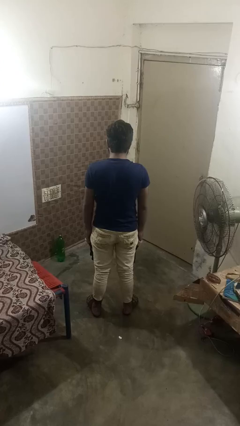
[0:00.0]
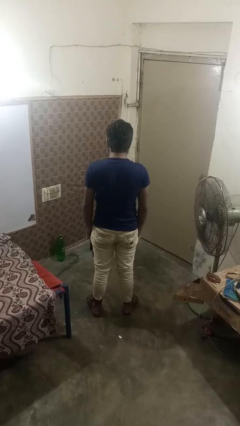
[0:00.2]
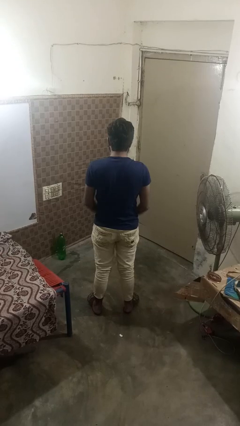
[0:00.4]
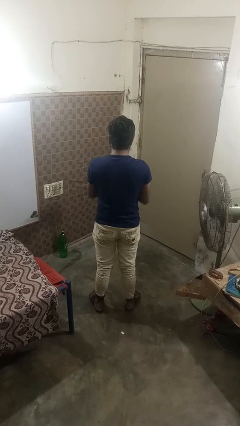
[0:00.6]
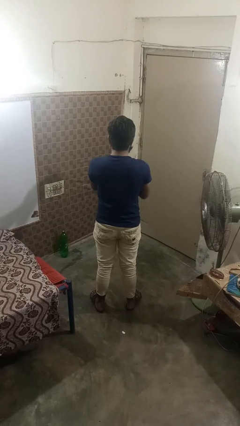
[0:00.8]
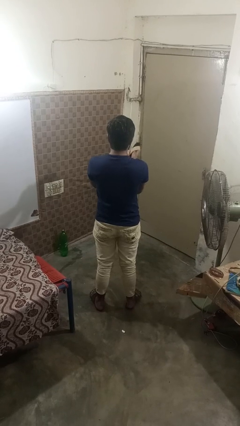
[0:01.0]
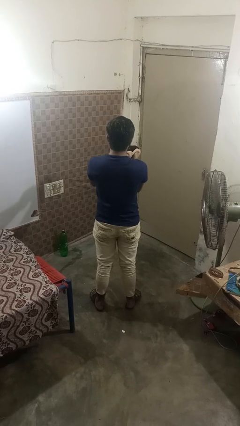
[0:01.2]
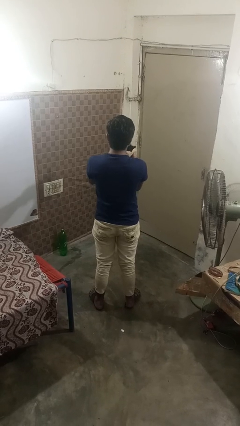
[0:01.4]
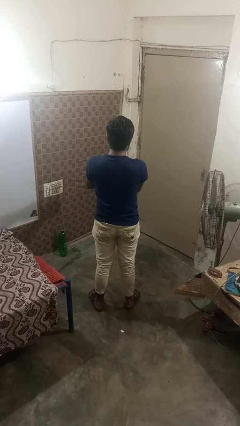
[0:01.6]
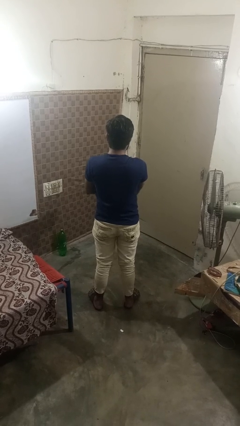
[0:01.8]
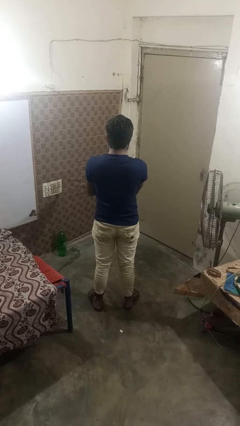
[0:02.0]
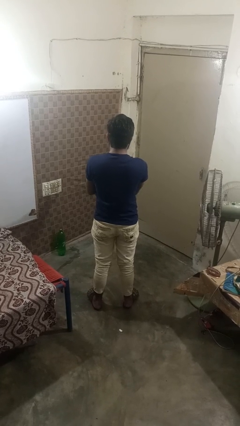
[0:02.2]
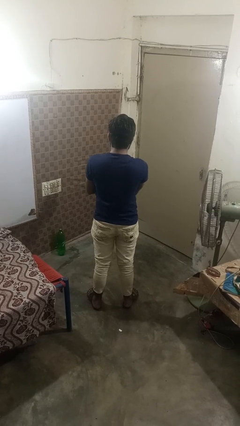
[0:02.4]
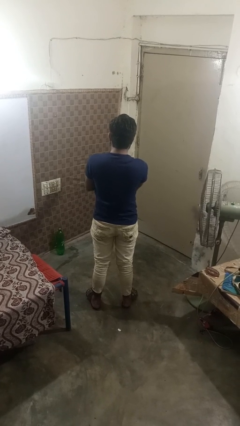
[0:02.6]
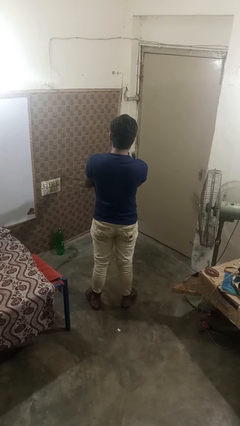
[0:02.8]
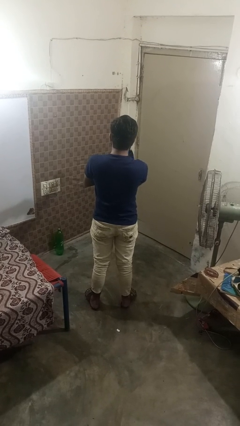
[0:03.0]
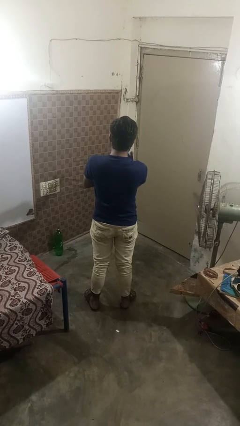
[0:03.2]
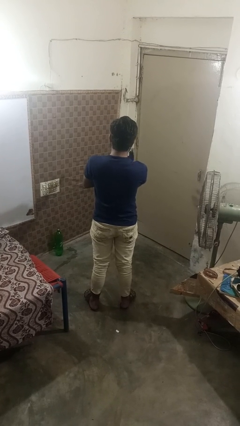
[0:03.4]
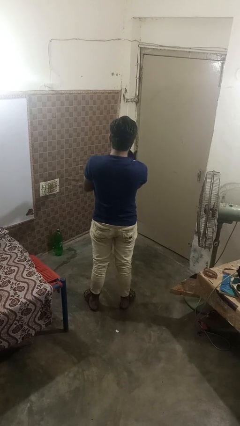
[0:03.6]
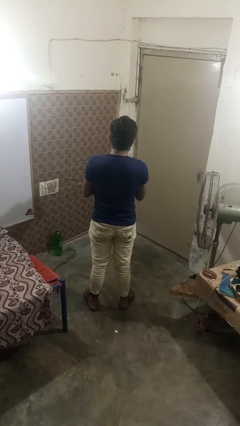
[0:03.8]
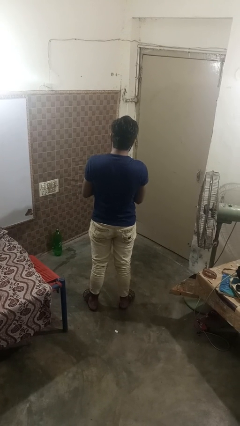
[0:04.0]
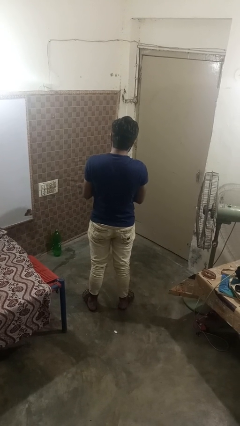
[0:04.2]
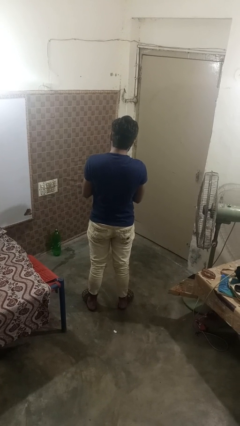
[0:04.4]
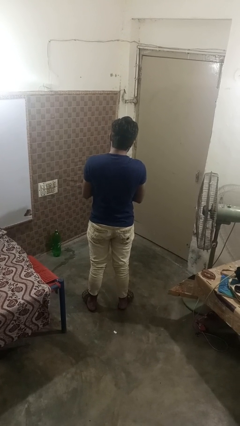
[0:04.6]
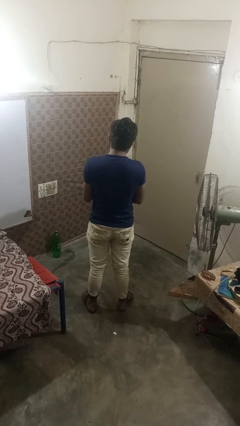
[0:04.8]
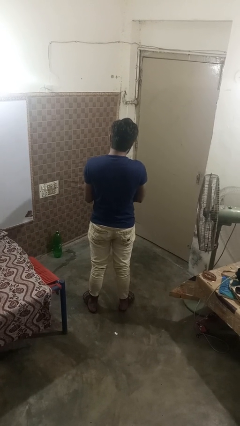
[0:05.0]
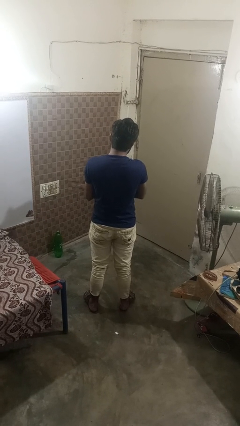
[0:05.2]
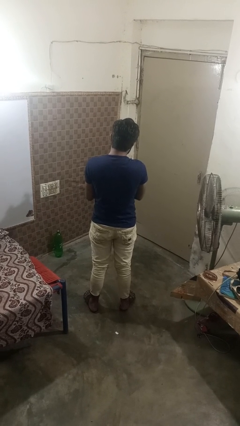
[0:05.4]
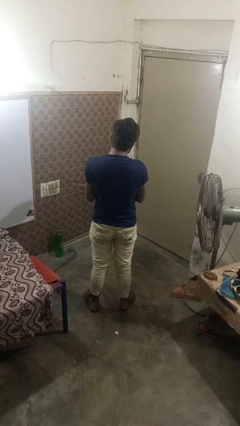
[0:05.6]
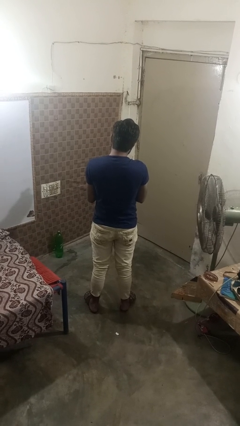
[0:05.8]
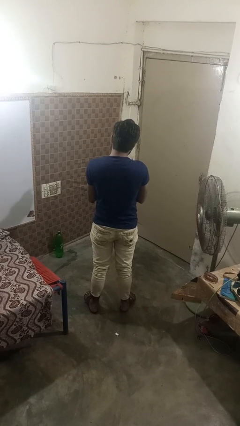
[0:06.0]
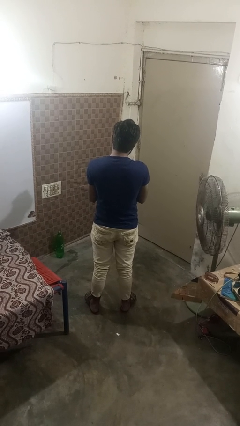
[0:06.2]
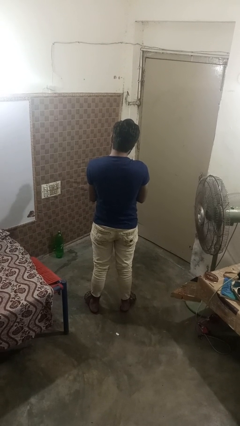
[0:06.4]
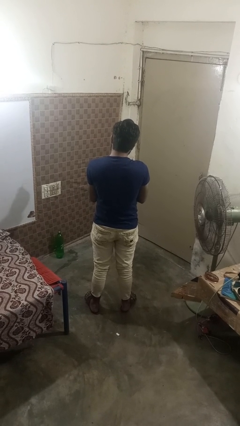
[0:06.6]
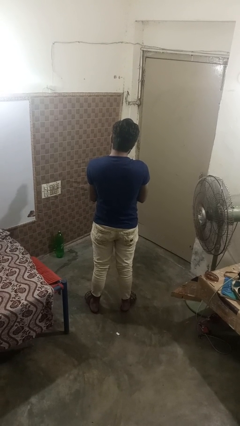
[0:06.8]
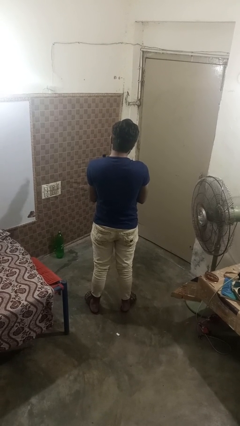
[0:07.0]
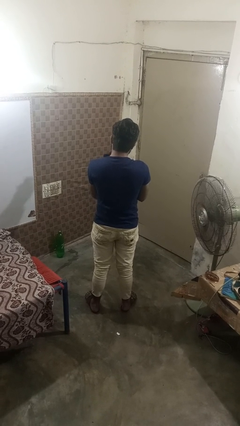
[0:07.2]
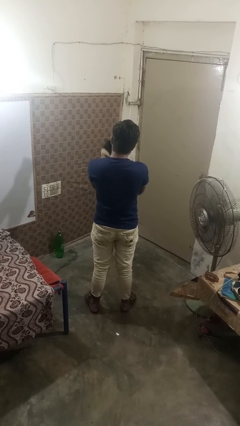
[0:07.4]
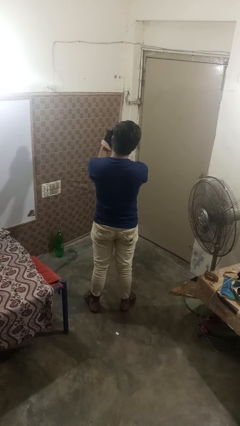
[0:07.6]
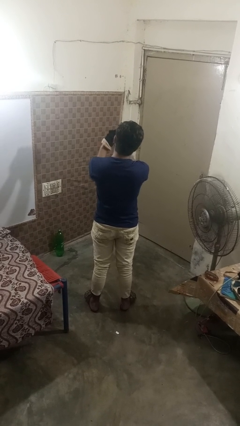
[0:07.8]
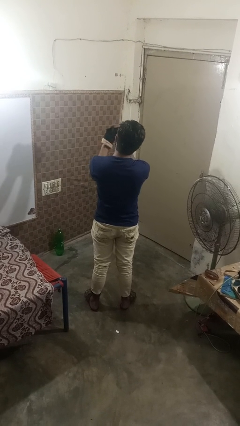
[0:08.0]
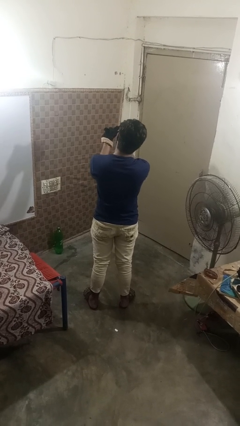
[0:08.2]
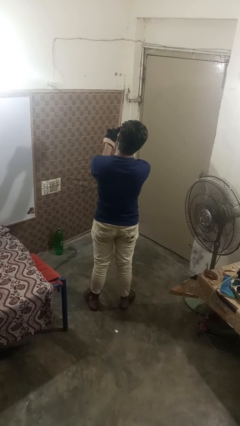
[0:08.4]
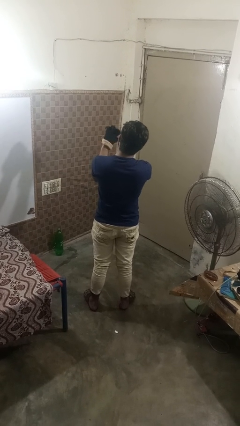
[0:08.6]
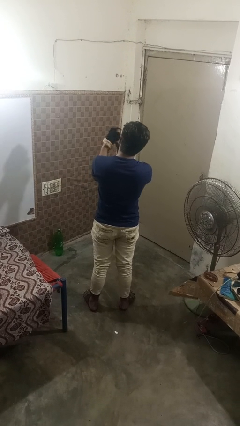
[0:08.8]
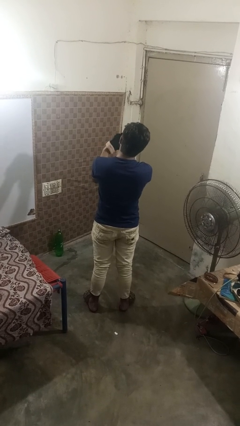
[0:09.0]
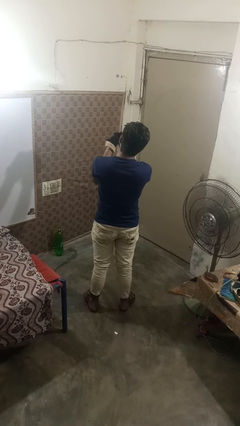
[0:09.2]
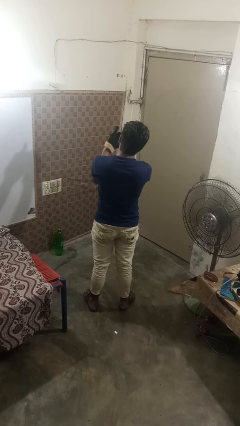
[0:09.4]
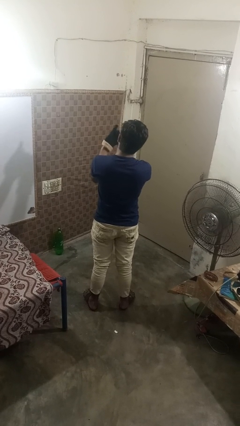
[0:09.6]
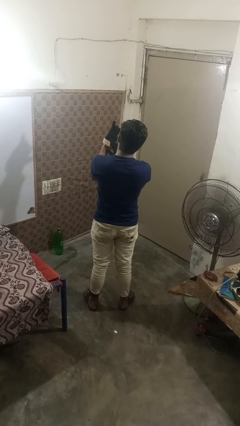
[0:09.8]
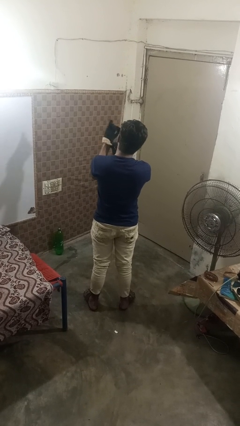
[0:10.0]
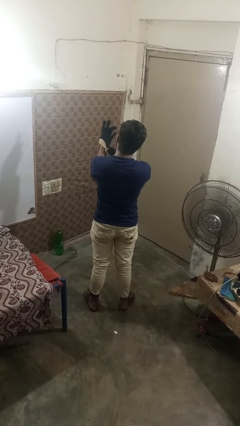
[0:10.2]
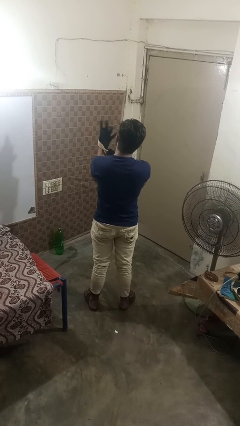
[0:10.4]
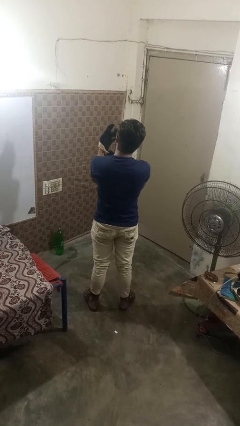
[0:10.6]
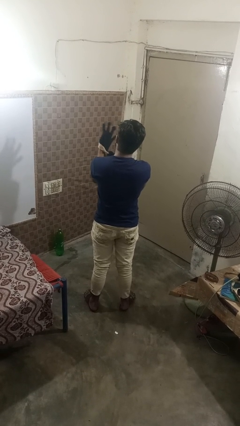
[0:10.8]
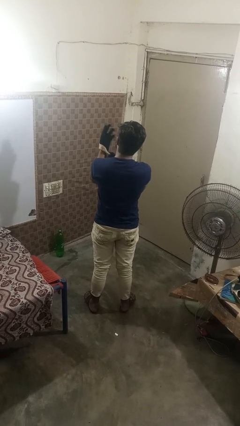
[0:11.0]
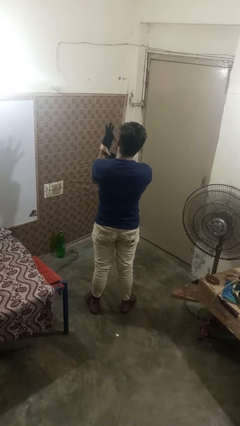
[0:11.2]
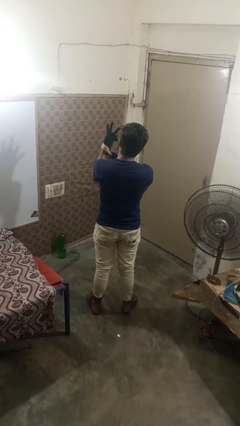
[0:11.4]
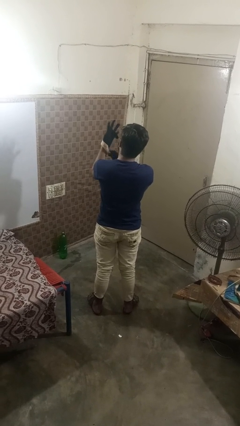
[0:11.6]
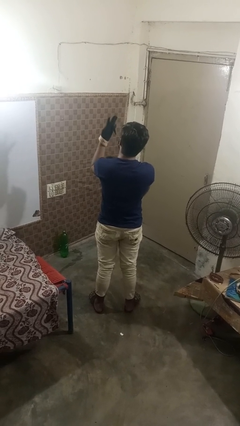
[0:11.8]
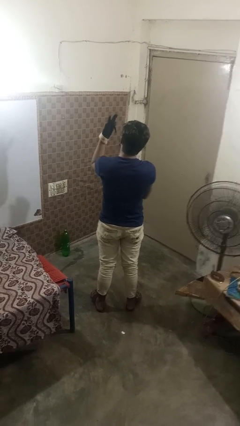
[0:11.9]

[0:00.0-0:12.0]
person puts on gloves

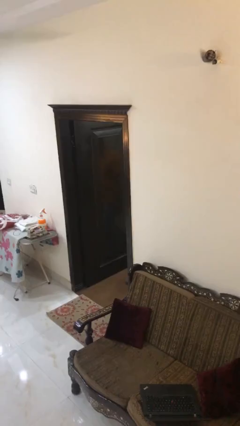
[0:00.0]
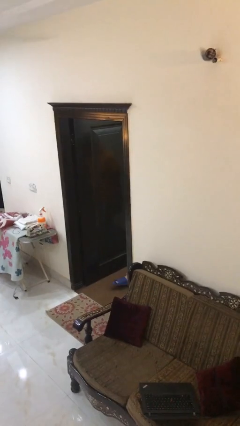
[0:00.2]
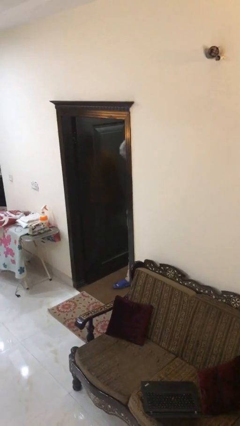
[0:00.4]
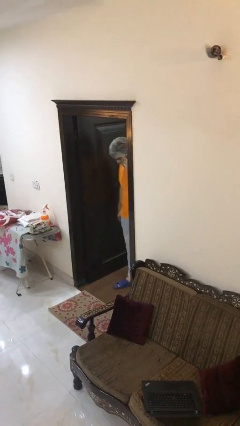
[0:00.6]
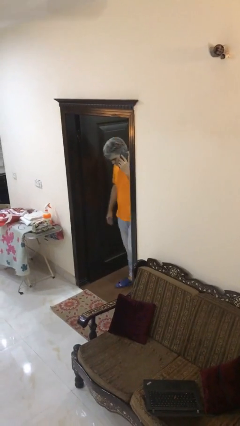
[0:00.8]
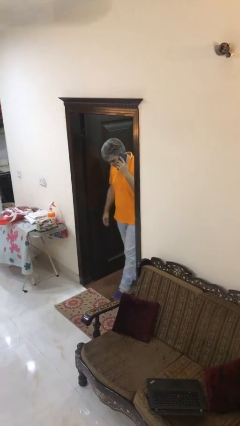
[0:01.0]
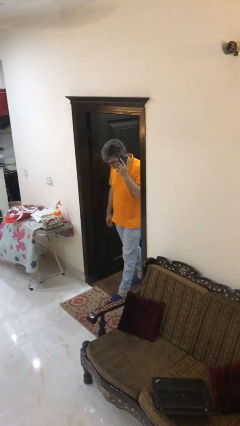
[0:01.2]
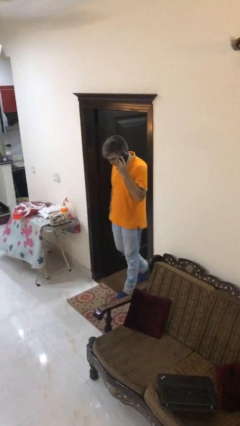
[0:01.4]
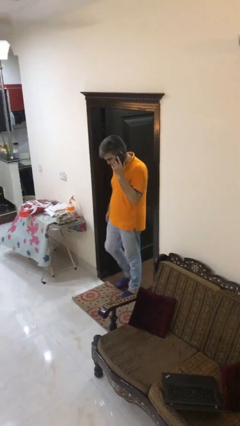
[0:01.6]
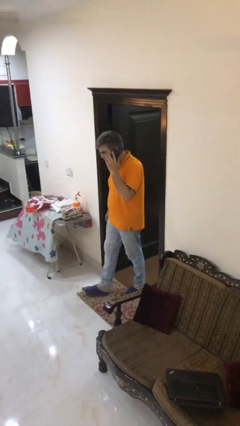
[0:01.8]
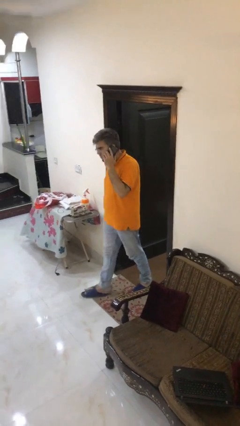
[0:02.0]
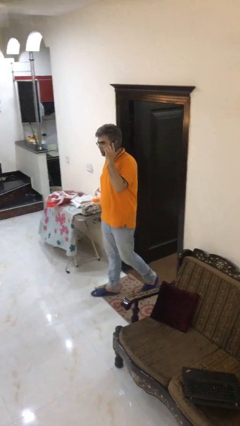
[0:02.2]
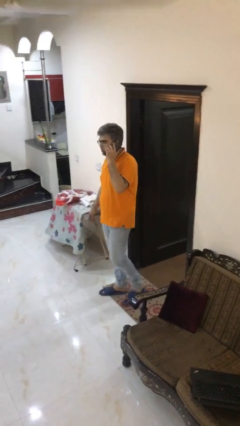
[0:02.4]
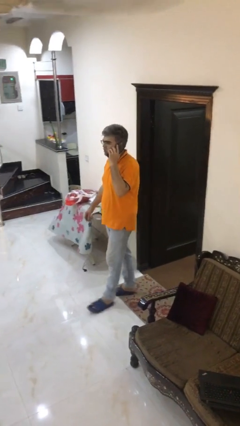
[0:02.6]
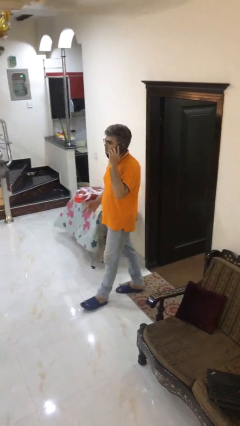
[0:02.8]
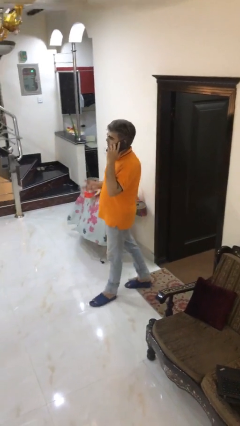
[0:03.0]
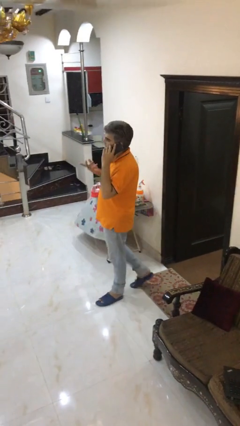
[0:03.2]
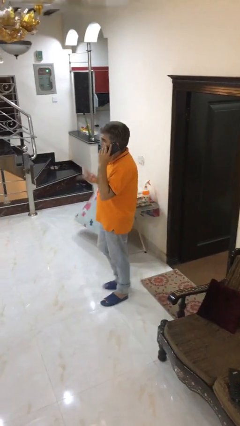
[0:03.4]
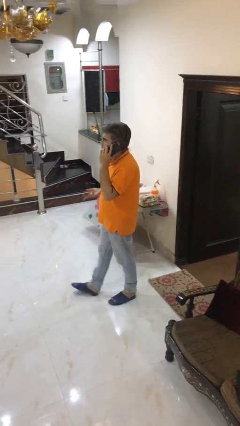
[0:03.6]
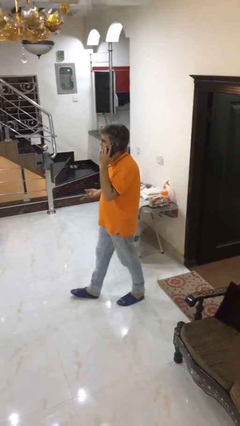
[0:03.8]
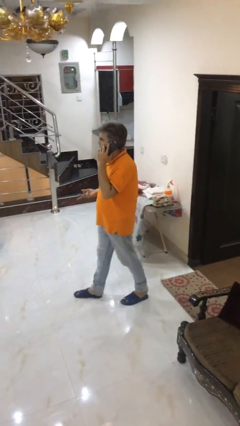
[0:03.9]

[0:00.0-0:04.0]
person enters scene through structure

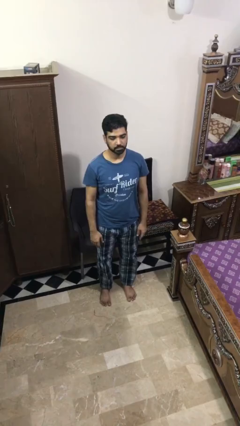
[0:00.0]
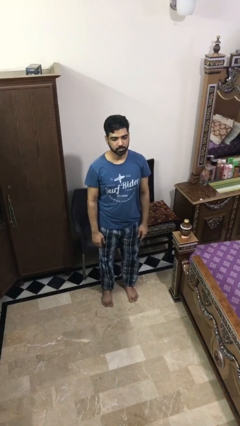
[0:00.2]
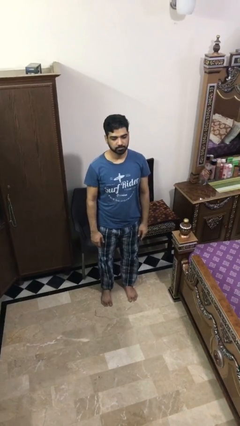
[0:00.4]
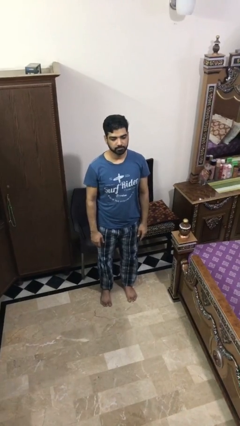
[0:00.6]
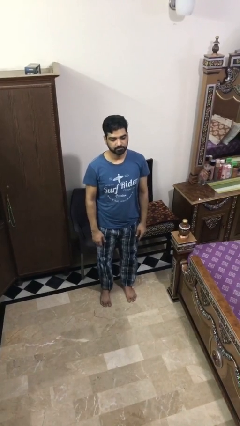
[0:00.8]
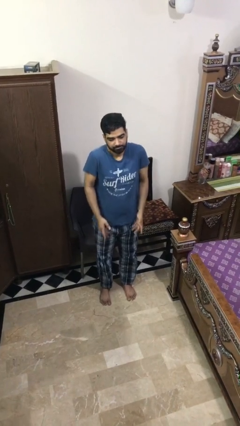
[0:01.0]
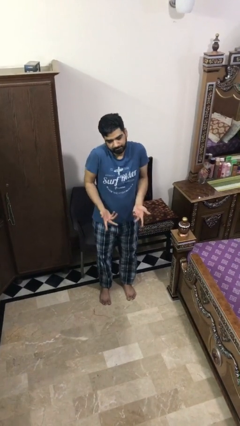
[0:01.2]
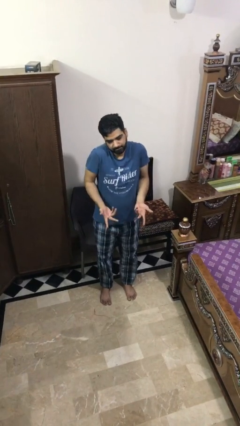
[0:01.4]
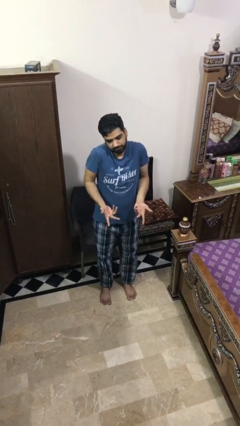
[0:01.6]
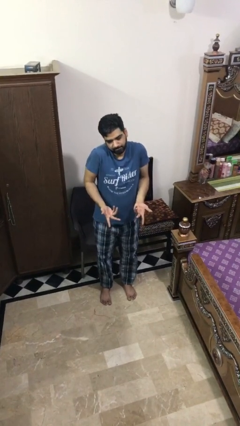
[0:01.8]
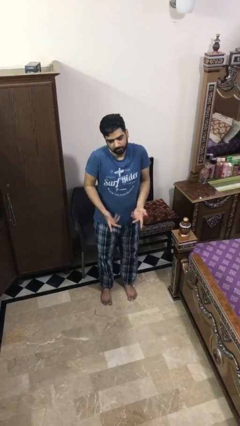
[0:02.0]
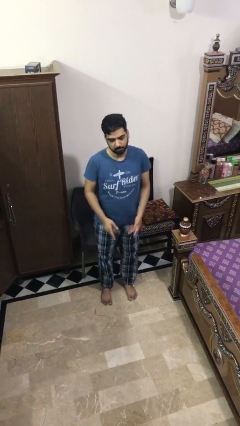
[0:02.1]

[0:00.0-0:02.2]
person shrugs
